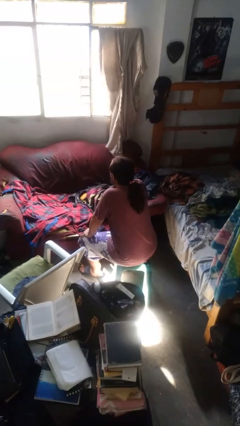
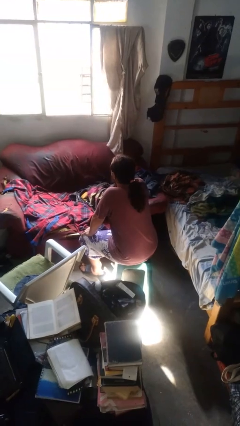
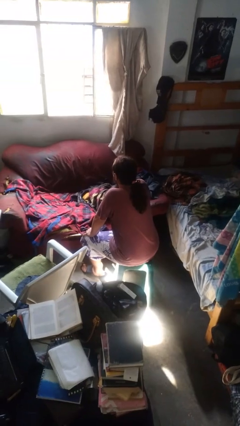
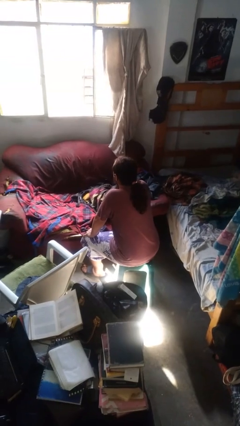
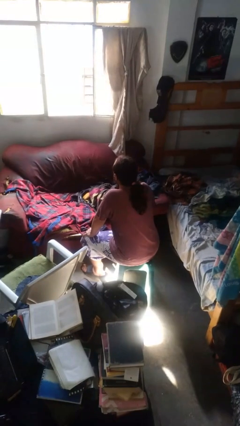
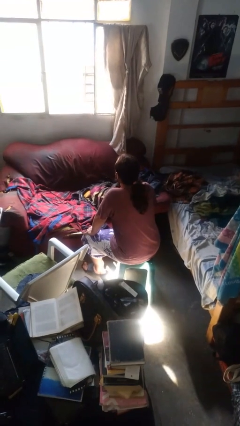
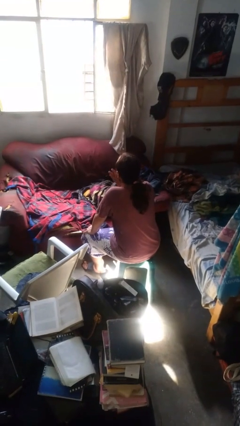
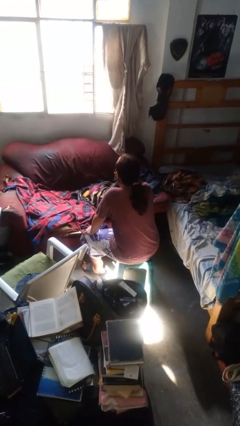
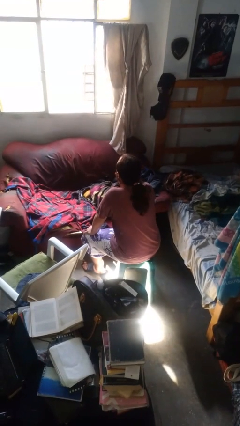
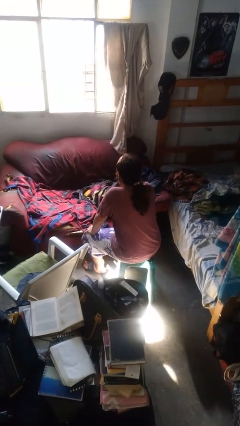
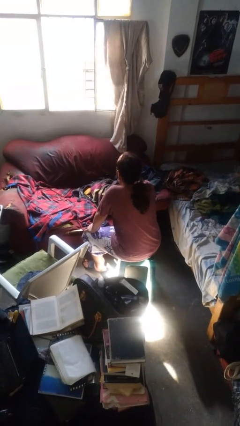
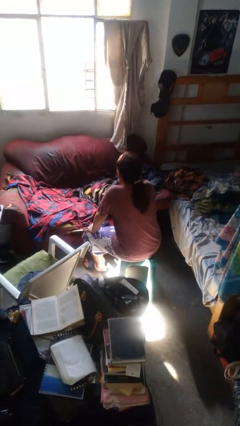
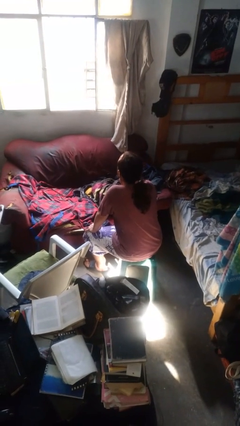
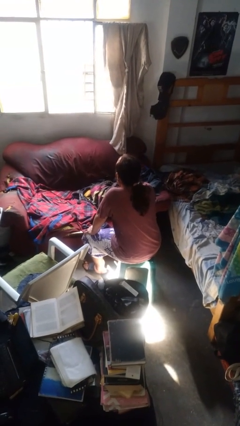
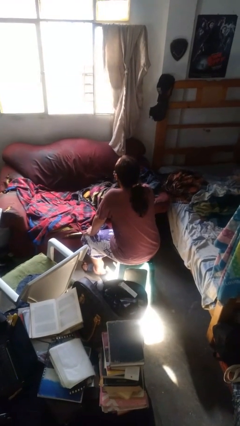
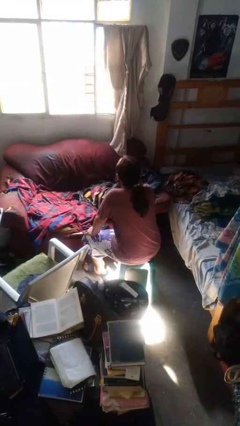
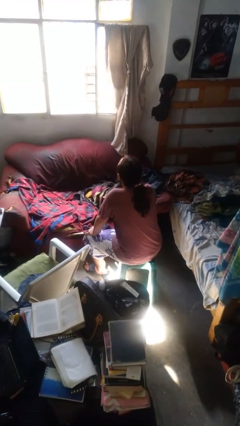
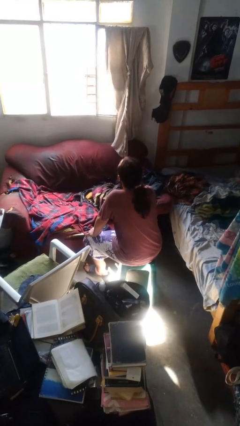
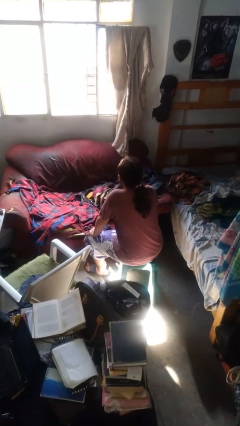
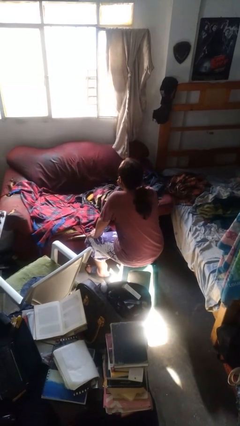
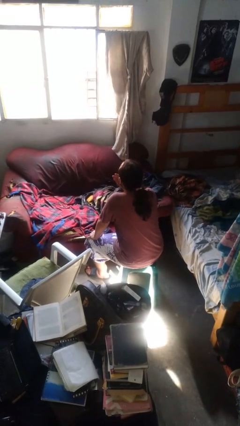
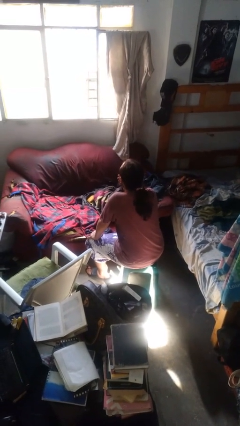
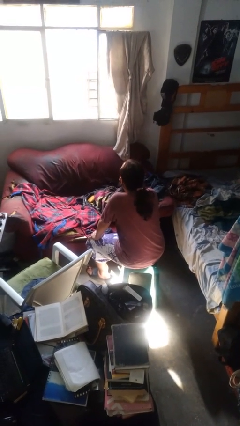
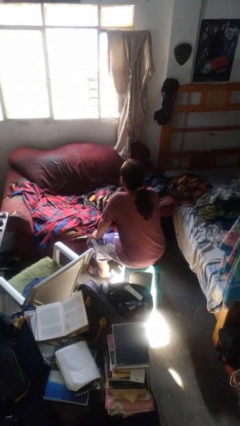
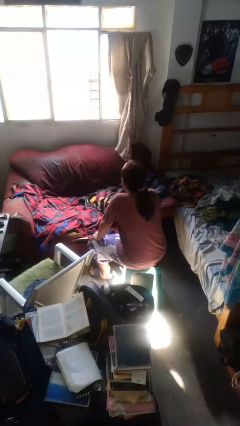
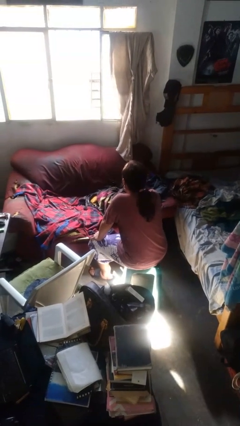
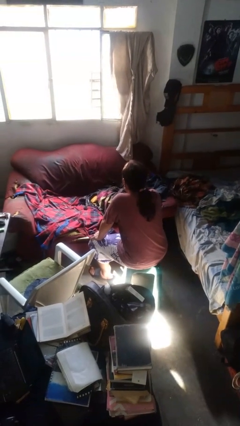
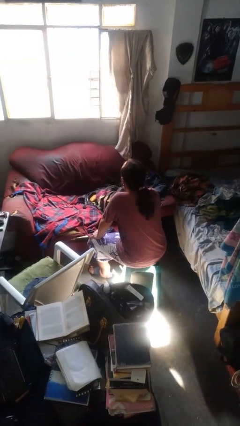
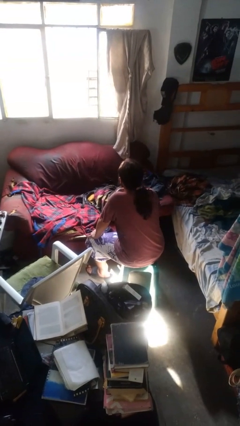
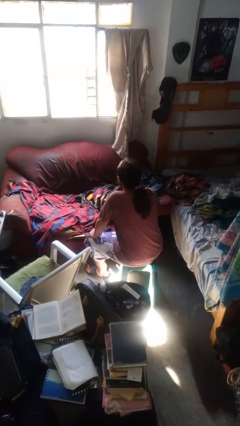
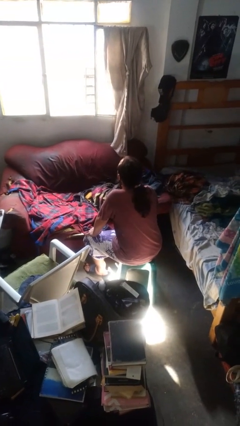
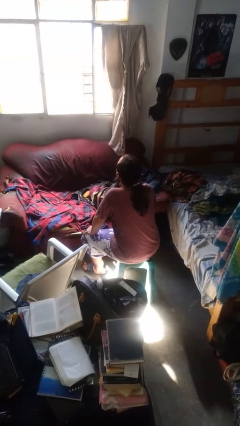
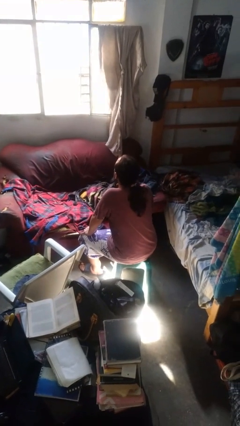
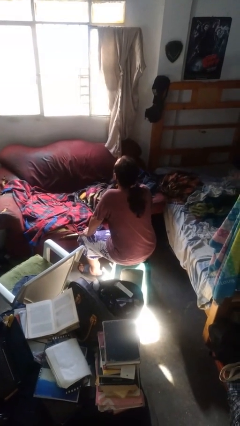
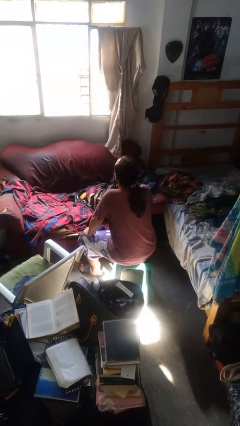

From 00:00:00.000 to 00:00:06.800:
person strokes chin

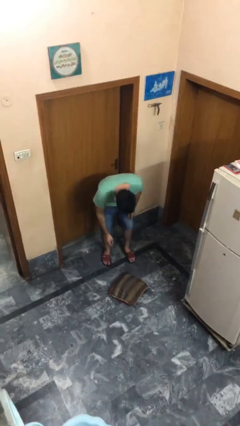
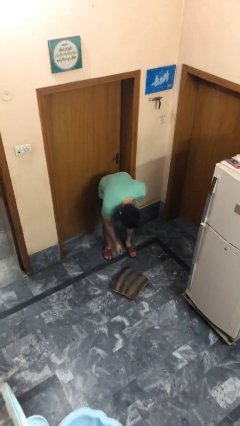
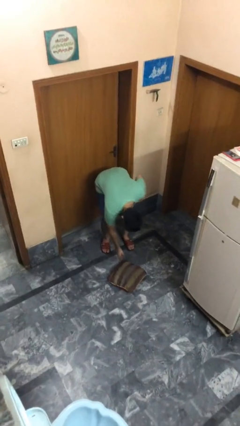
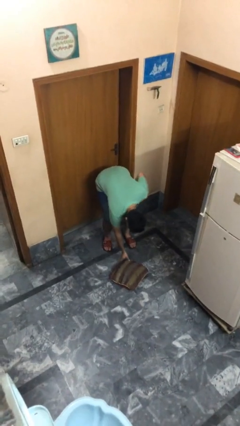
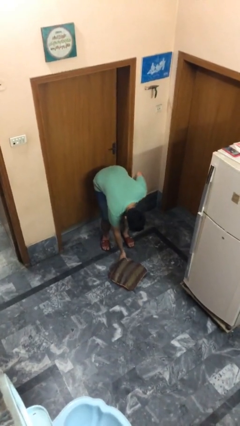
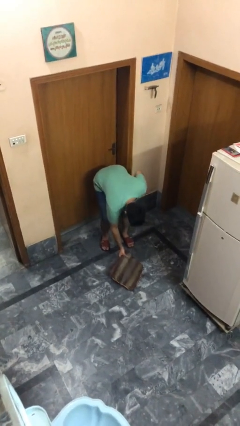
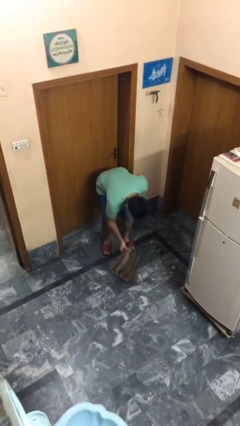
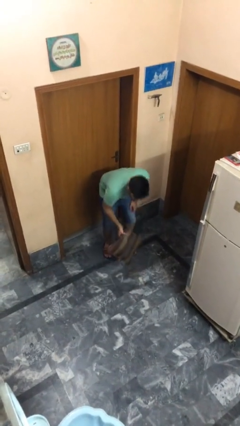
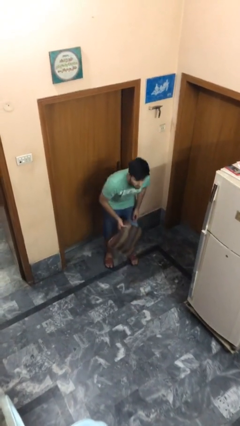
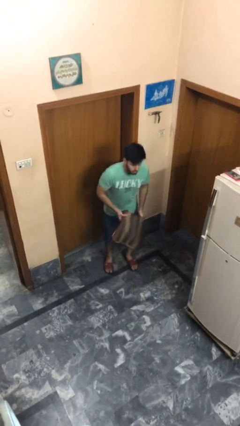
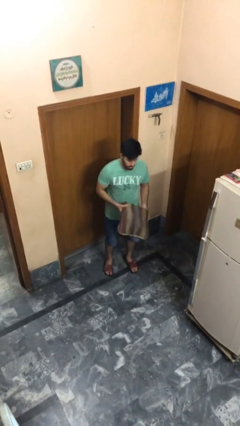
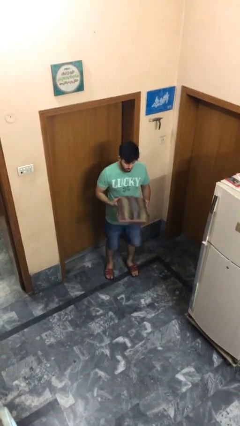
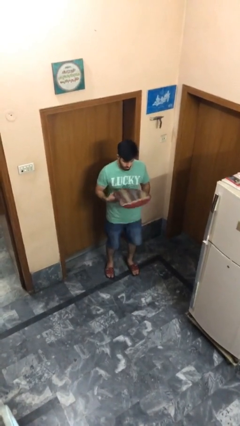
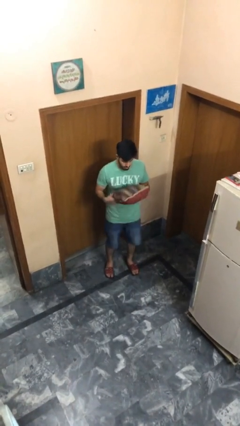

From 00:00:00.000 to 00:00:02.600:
person picks up object from floor

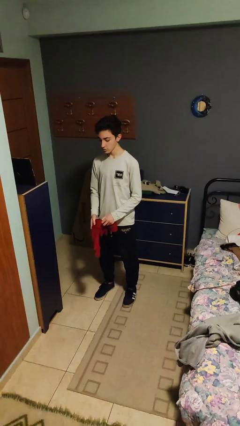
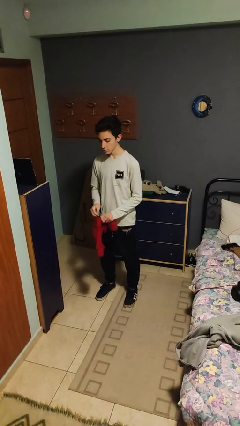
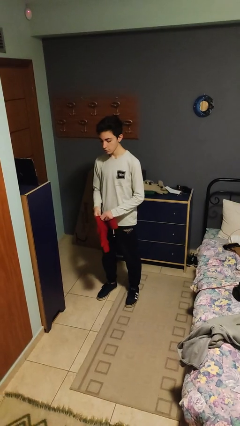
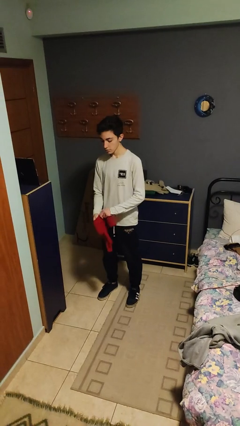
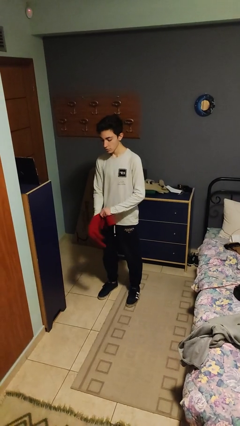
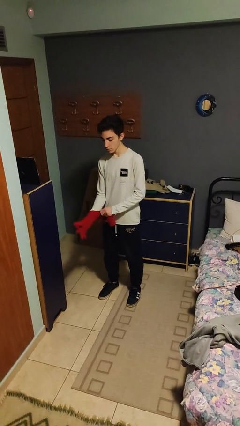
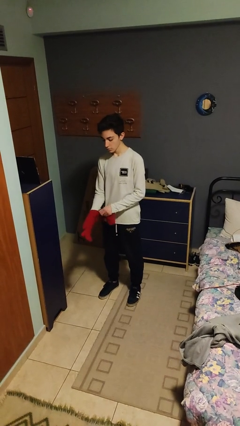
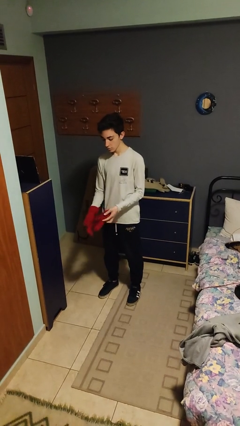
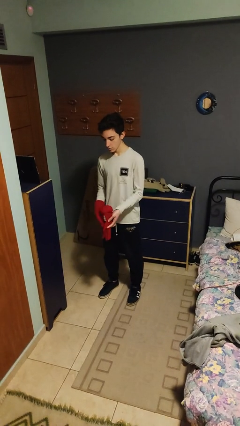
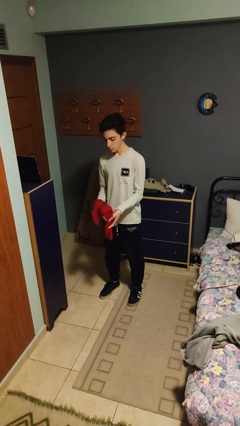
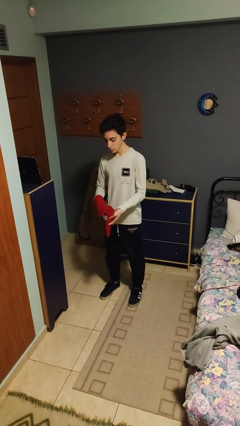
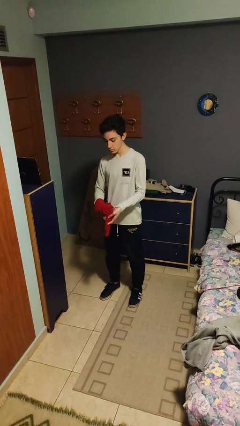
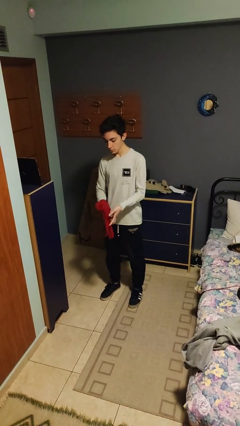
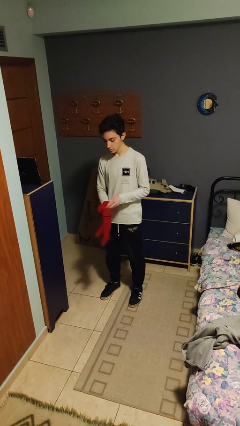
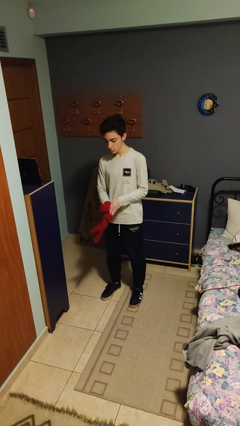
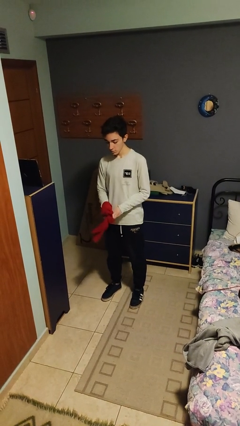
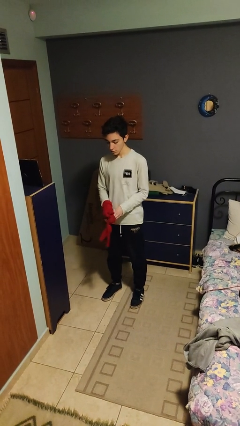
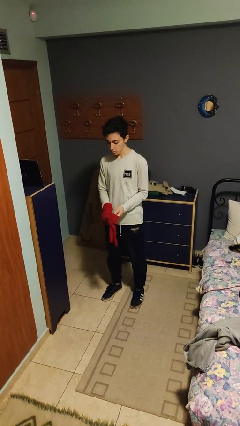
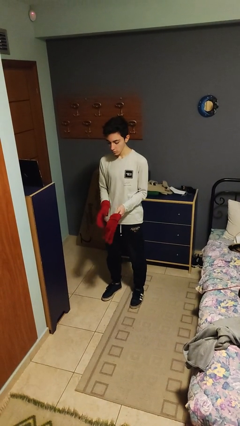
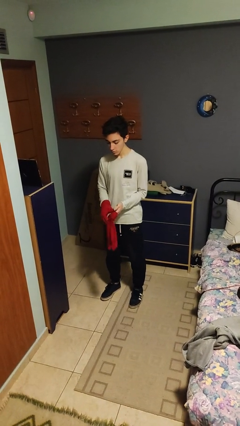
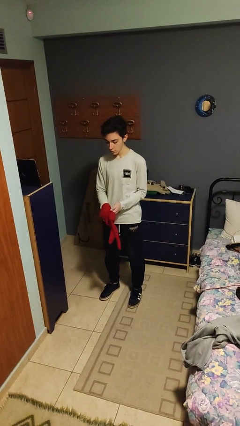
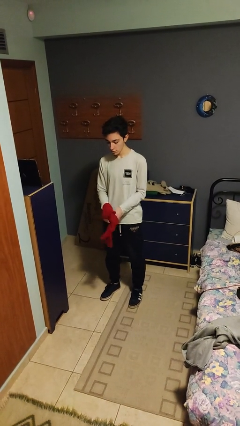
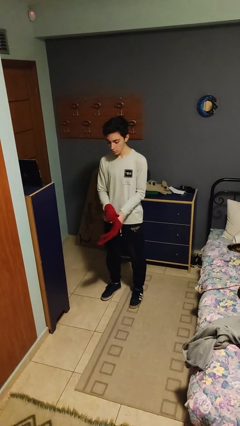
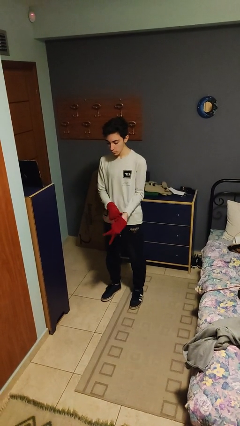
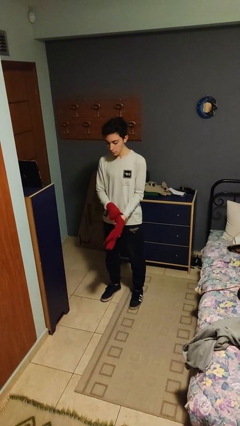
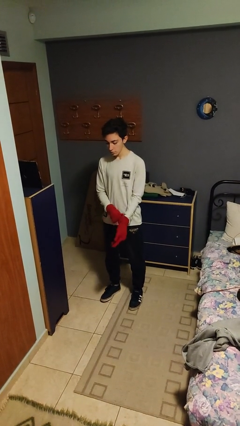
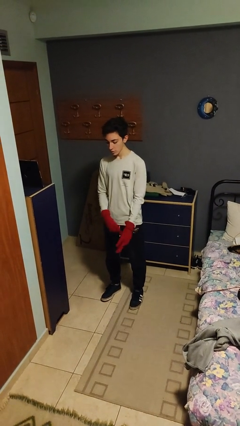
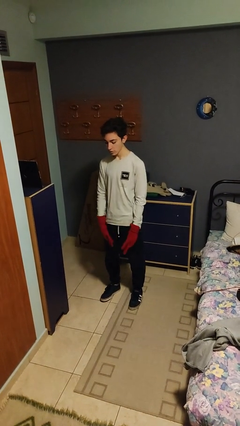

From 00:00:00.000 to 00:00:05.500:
person puts on gloves

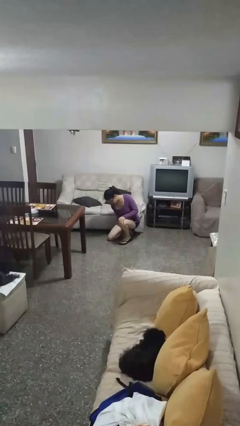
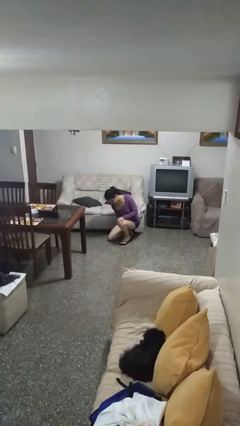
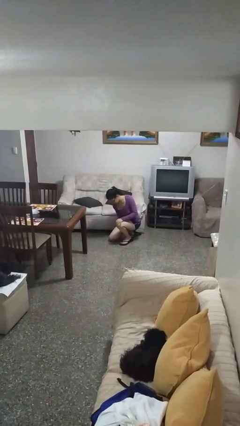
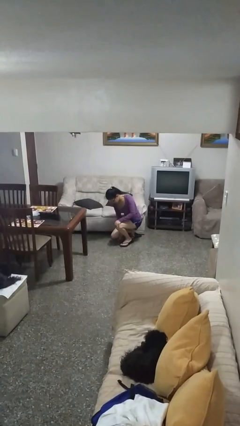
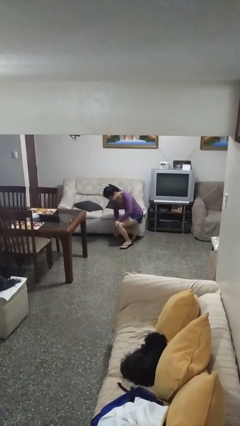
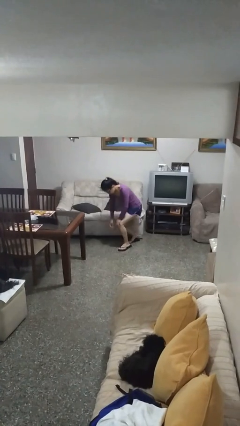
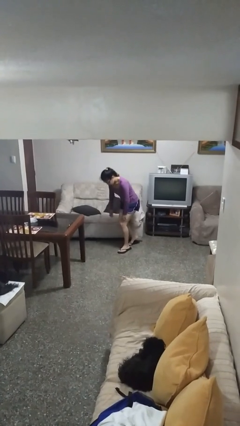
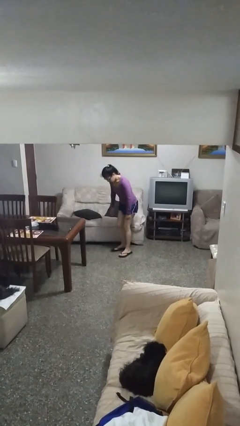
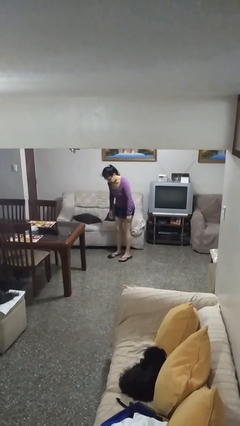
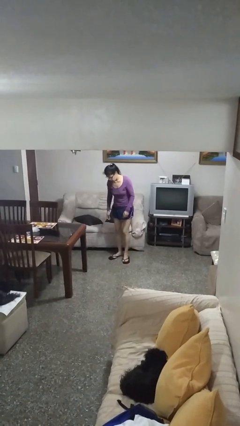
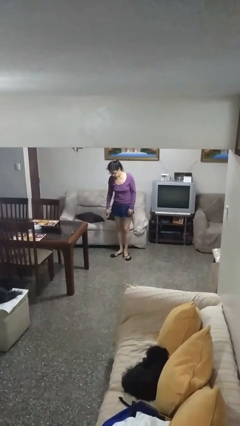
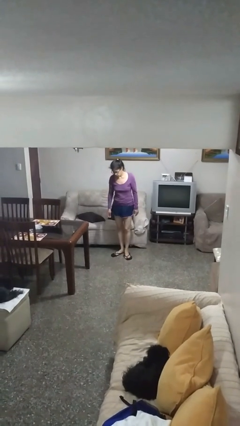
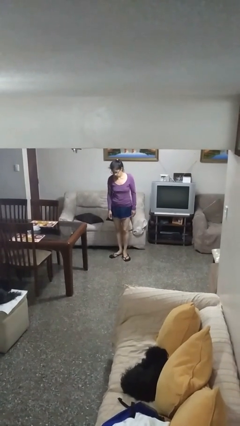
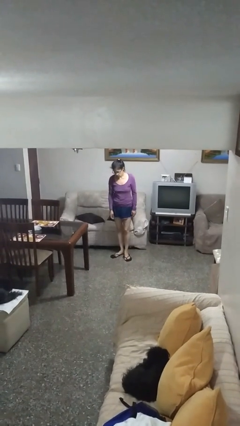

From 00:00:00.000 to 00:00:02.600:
person stands up from floor
